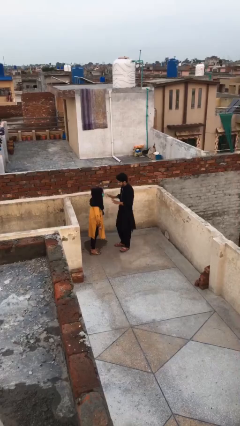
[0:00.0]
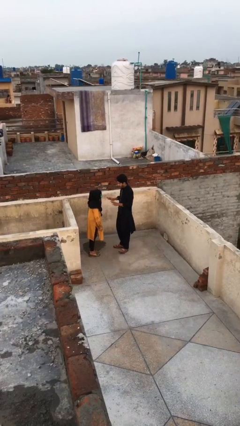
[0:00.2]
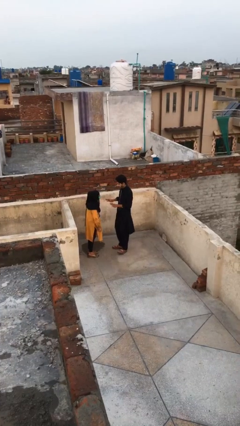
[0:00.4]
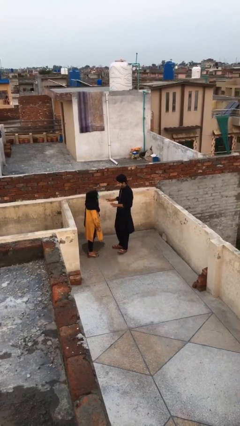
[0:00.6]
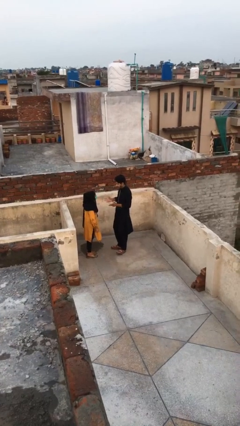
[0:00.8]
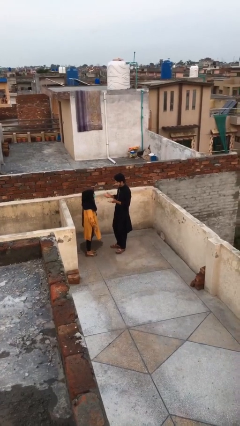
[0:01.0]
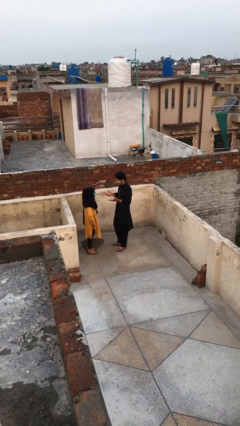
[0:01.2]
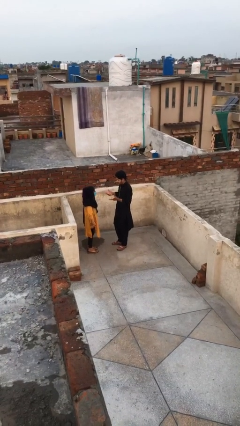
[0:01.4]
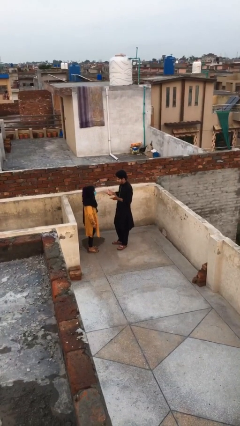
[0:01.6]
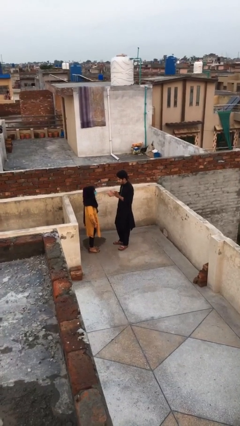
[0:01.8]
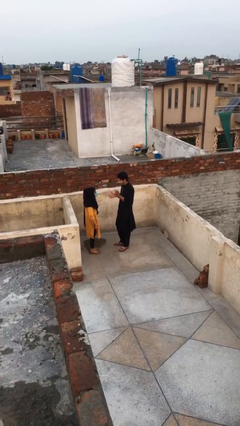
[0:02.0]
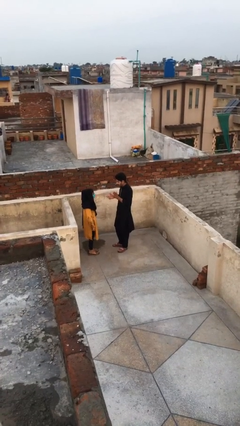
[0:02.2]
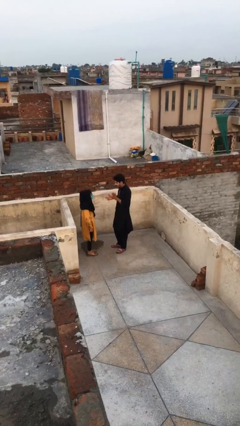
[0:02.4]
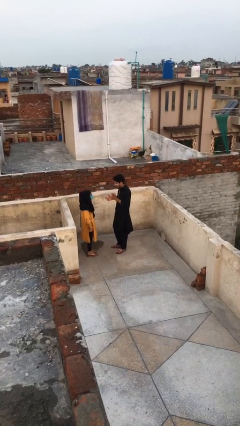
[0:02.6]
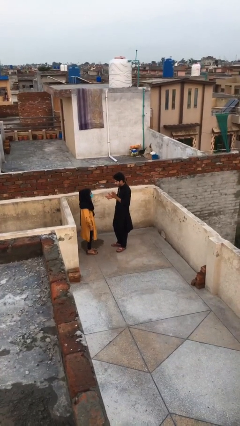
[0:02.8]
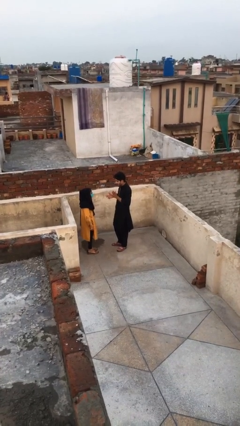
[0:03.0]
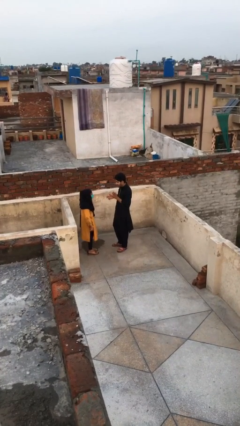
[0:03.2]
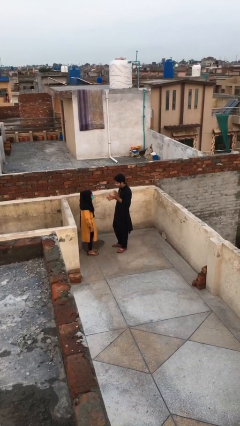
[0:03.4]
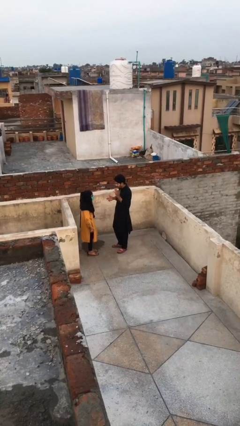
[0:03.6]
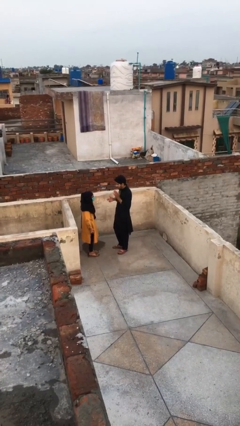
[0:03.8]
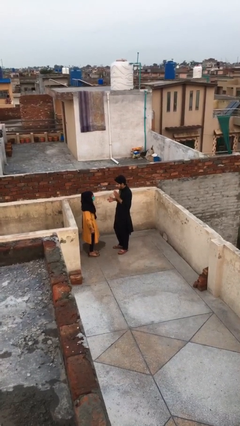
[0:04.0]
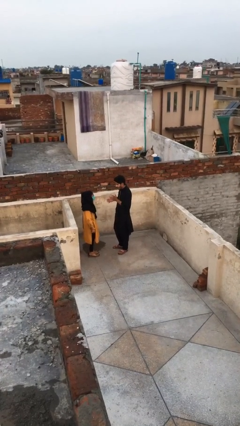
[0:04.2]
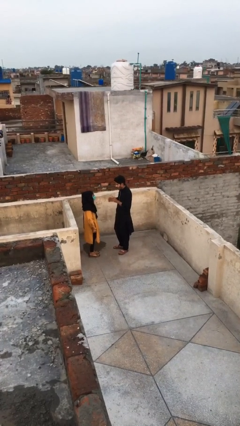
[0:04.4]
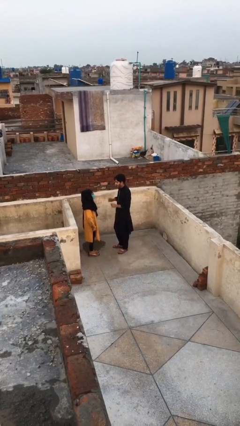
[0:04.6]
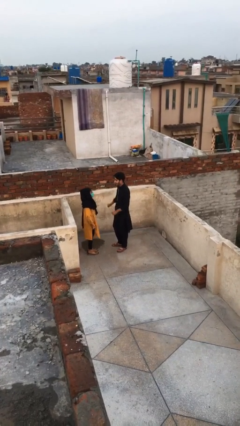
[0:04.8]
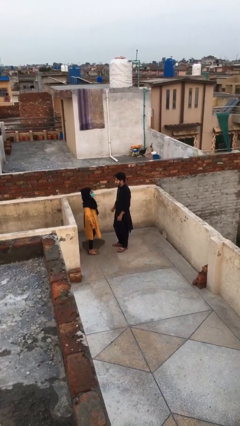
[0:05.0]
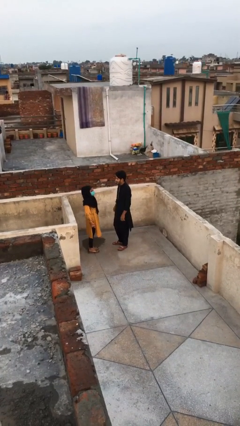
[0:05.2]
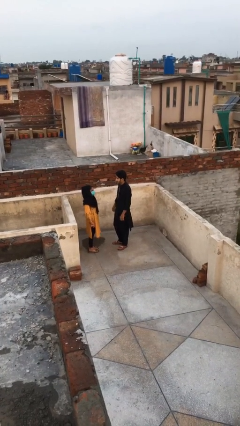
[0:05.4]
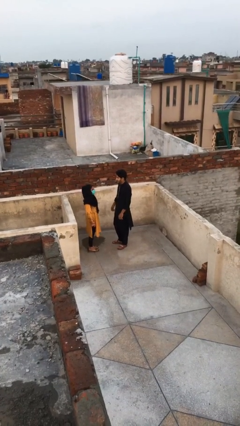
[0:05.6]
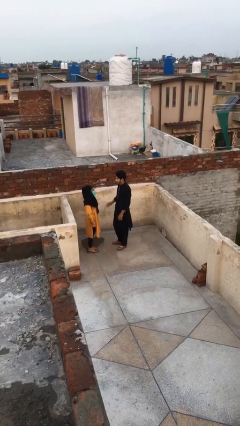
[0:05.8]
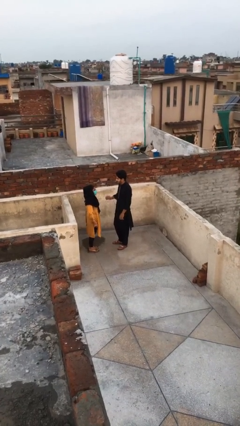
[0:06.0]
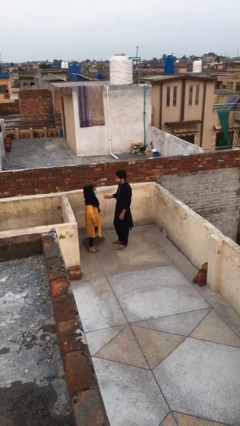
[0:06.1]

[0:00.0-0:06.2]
person talks to person

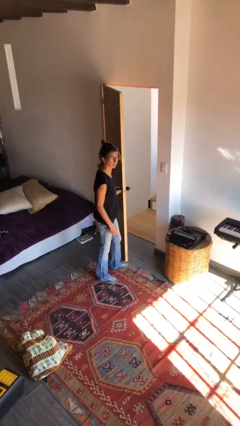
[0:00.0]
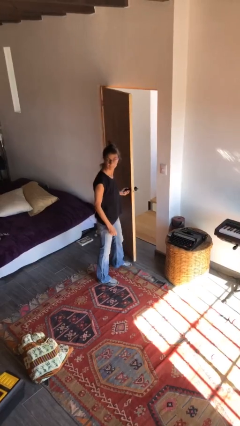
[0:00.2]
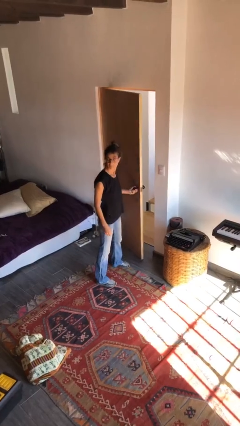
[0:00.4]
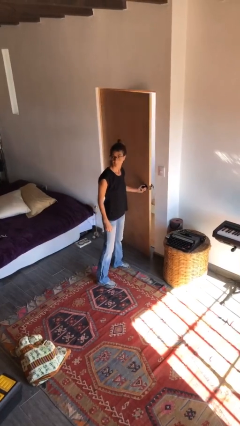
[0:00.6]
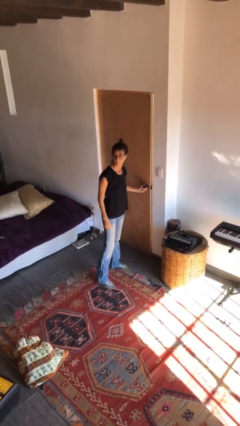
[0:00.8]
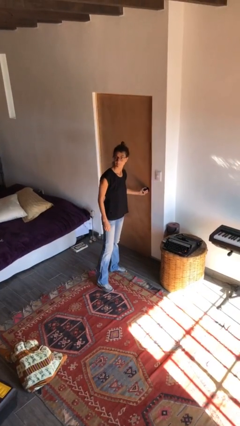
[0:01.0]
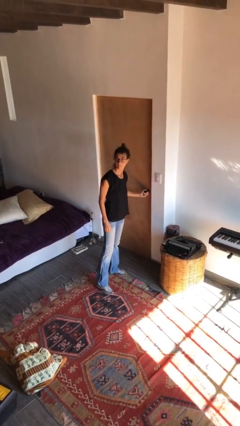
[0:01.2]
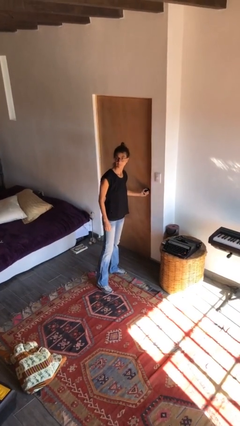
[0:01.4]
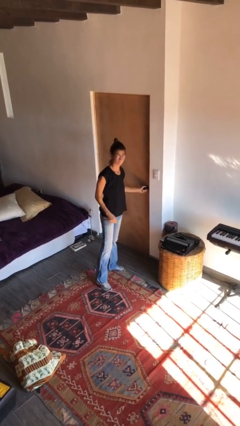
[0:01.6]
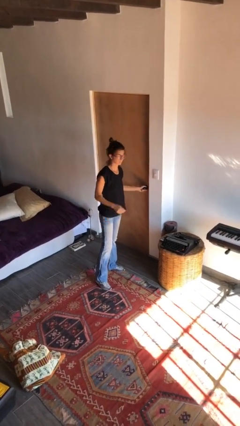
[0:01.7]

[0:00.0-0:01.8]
person closes facility door

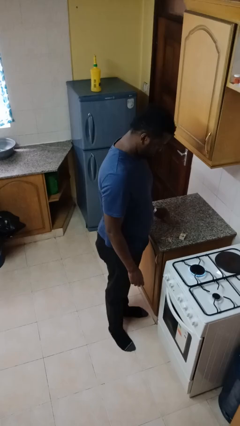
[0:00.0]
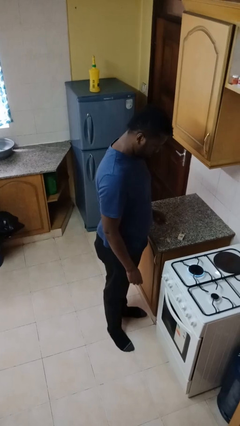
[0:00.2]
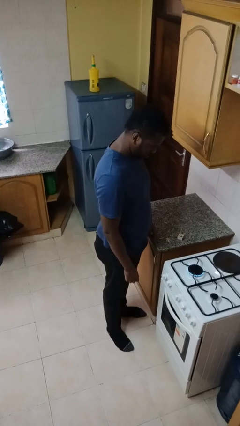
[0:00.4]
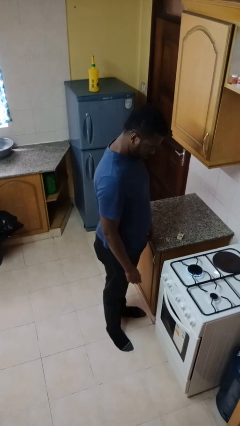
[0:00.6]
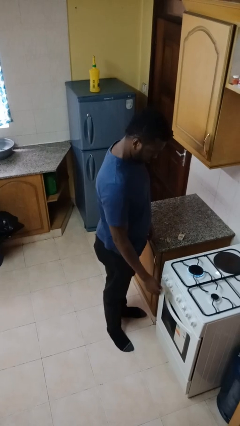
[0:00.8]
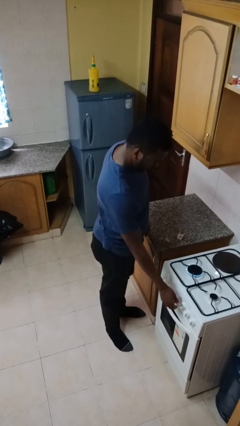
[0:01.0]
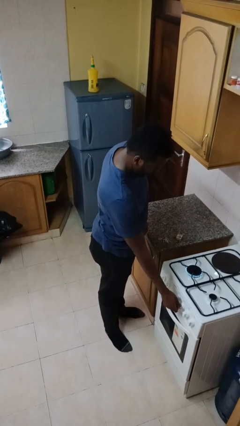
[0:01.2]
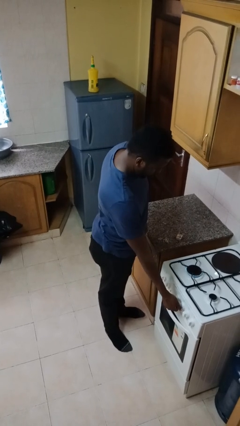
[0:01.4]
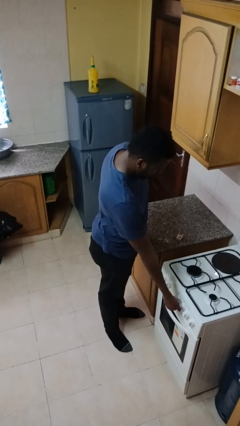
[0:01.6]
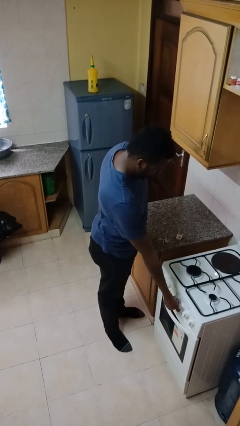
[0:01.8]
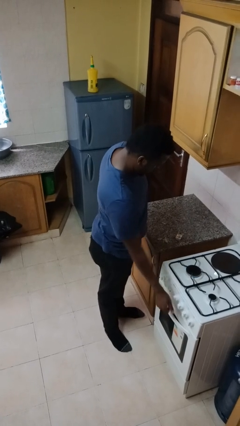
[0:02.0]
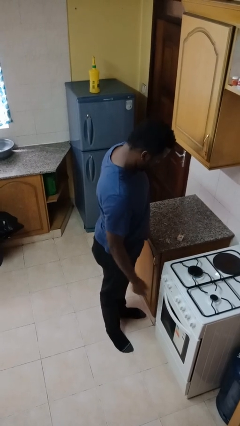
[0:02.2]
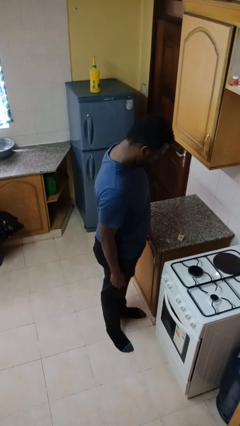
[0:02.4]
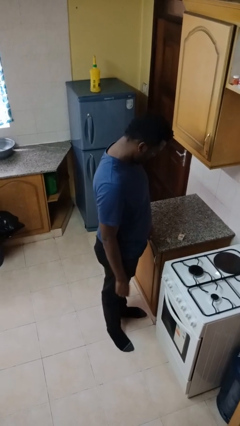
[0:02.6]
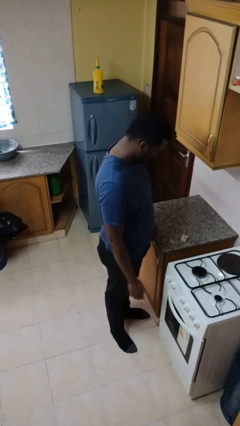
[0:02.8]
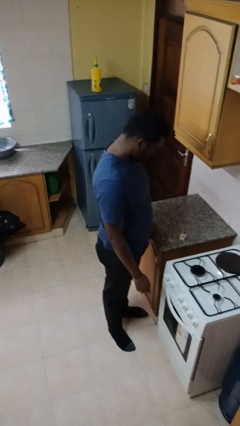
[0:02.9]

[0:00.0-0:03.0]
person turns off stovetop

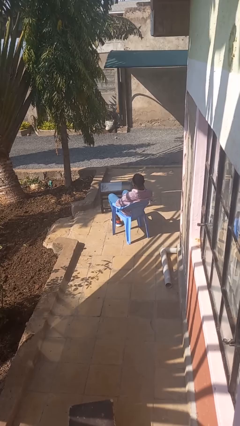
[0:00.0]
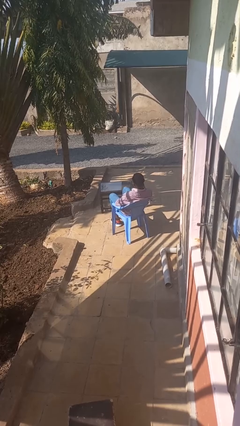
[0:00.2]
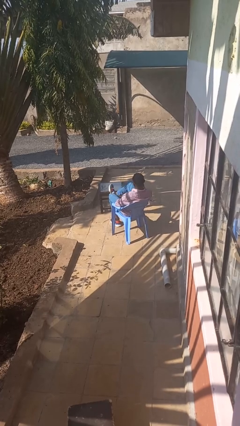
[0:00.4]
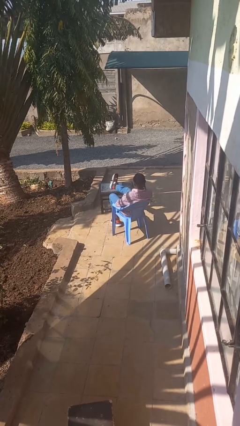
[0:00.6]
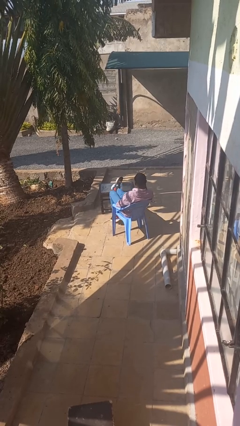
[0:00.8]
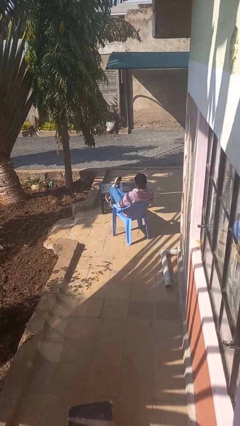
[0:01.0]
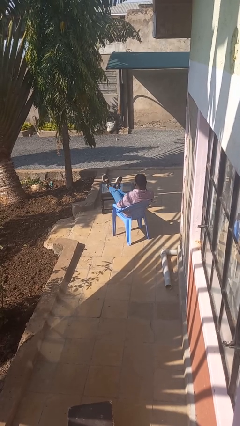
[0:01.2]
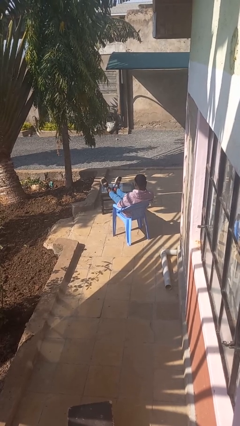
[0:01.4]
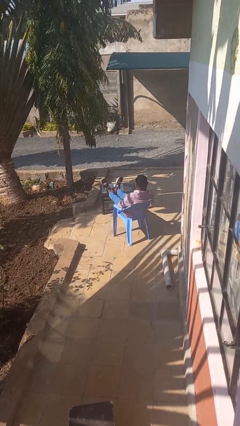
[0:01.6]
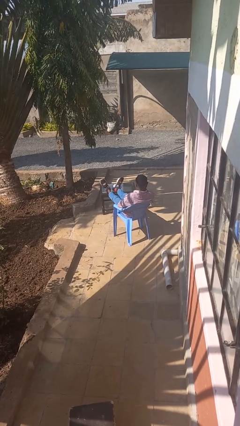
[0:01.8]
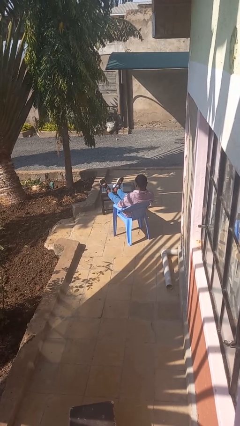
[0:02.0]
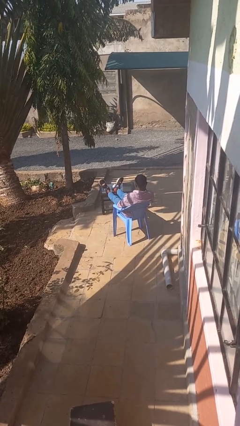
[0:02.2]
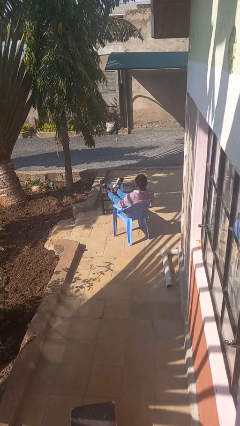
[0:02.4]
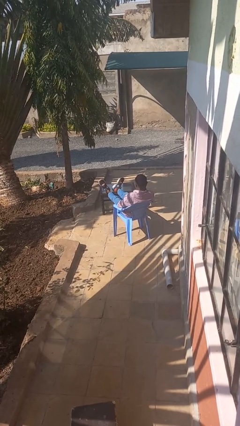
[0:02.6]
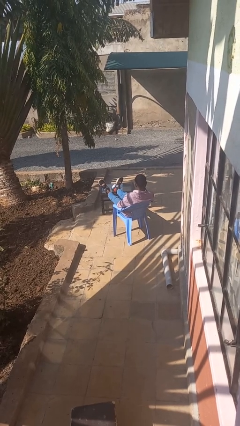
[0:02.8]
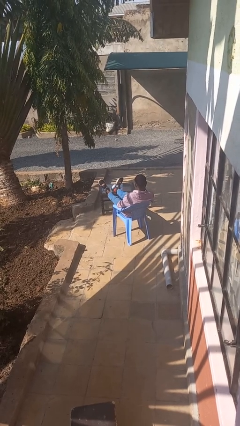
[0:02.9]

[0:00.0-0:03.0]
person puts feet up

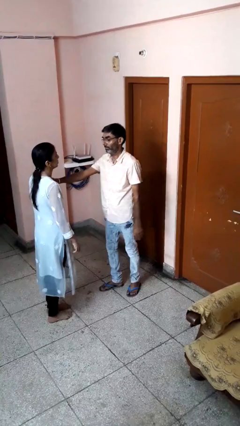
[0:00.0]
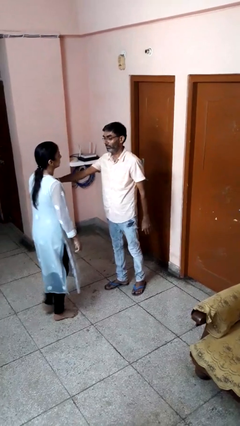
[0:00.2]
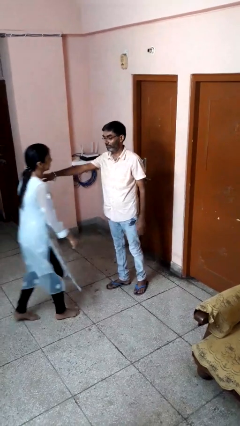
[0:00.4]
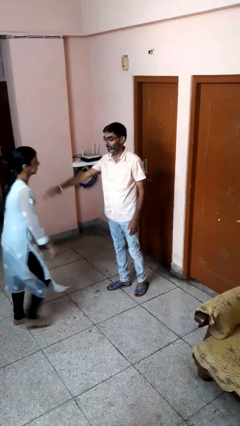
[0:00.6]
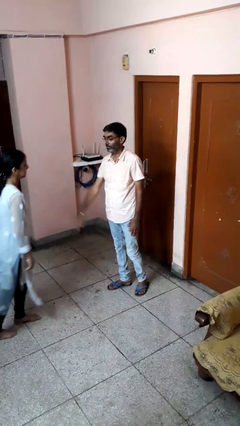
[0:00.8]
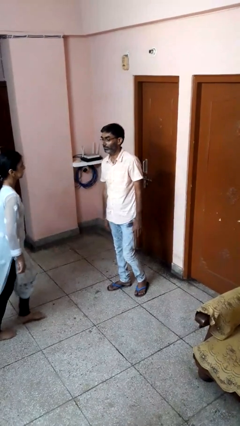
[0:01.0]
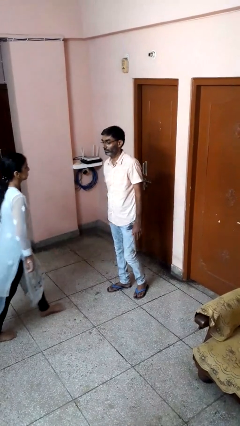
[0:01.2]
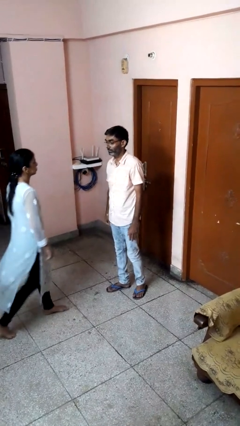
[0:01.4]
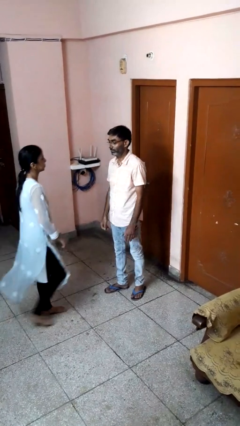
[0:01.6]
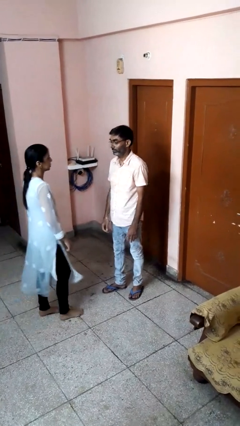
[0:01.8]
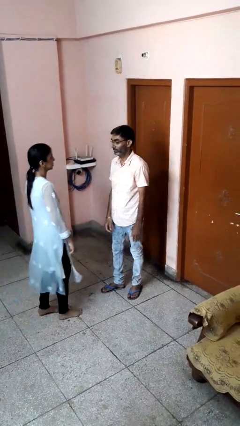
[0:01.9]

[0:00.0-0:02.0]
person shoves person

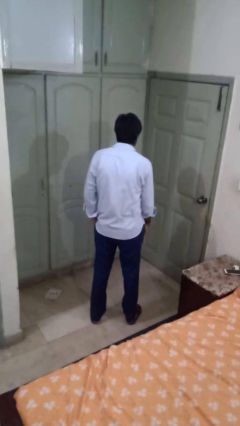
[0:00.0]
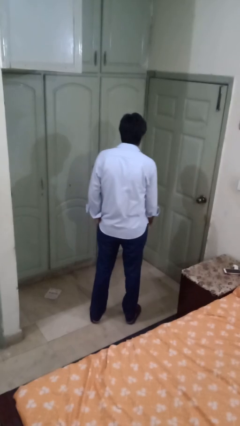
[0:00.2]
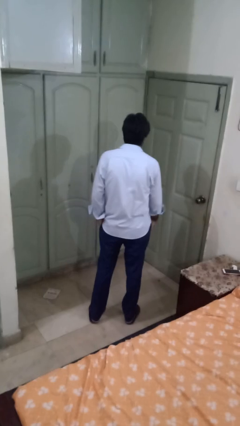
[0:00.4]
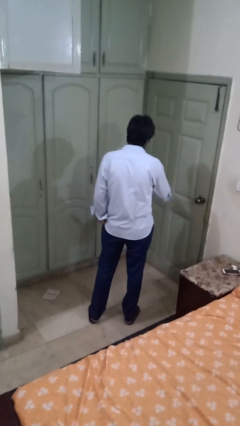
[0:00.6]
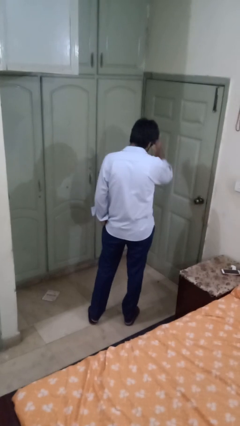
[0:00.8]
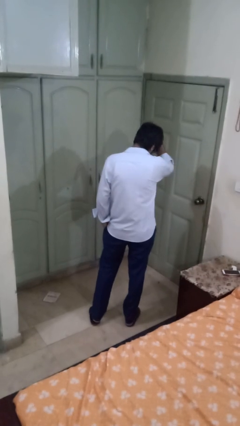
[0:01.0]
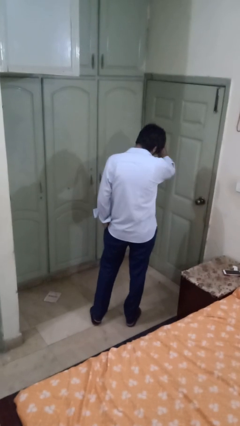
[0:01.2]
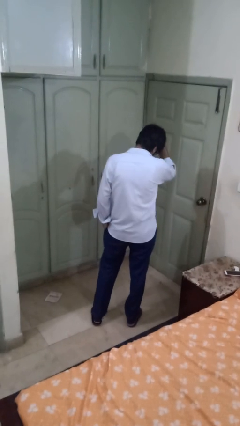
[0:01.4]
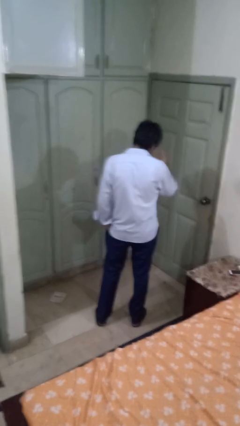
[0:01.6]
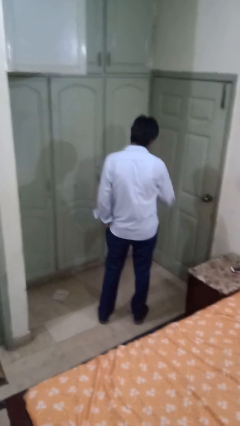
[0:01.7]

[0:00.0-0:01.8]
person pats head
